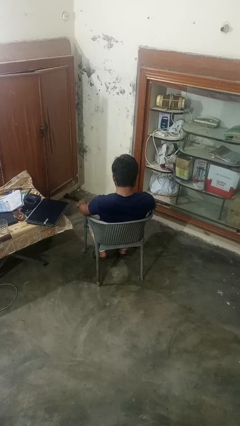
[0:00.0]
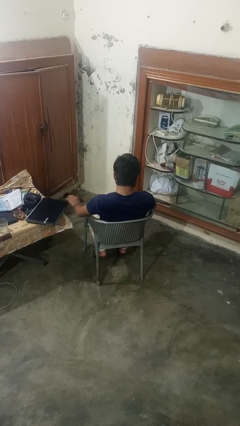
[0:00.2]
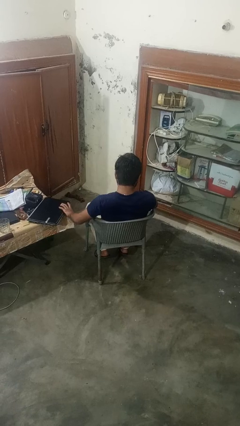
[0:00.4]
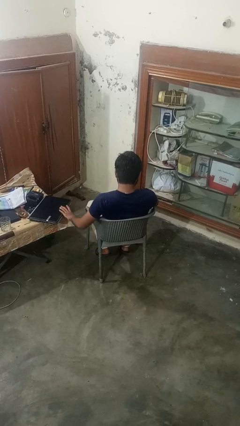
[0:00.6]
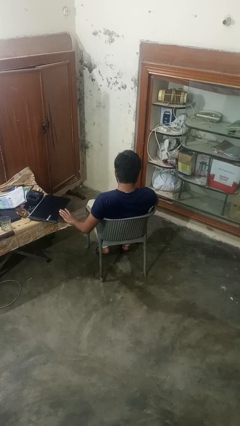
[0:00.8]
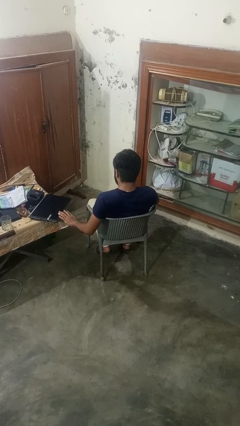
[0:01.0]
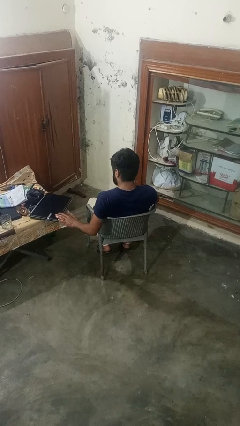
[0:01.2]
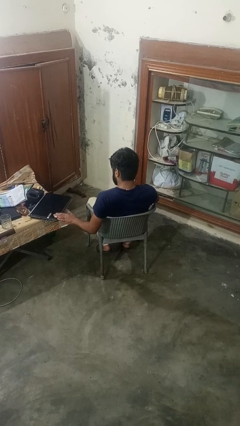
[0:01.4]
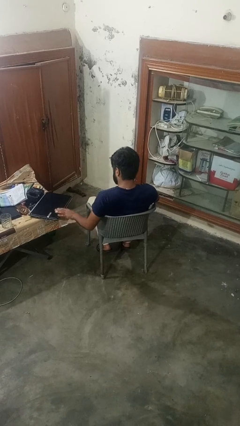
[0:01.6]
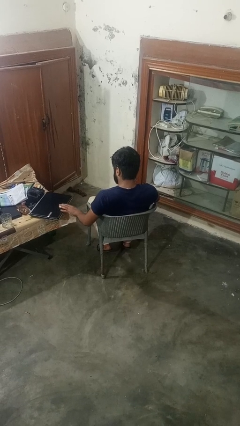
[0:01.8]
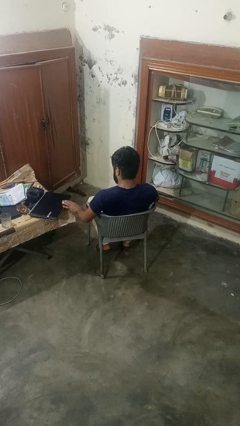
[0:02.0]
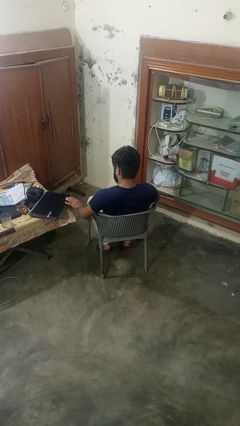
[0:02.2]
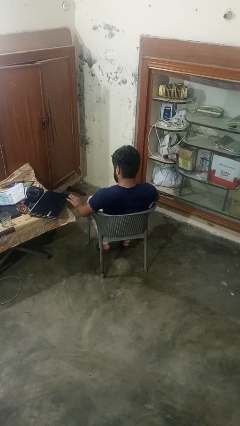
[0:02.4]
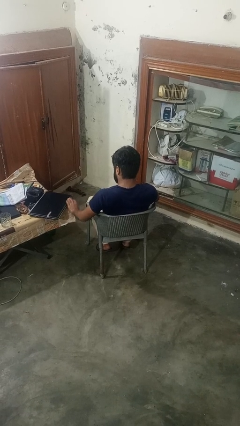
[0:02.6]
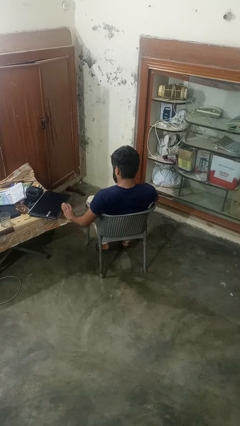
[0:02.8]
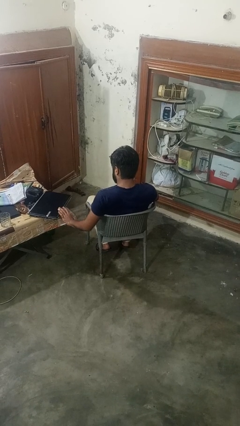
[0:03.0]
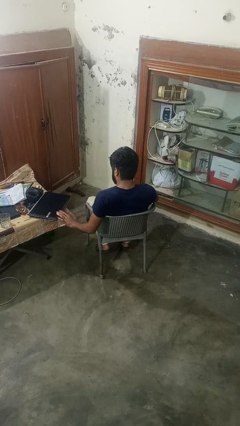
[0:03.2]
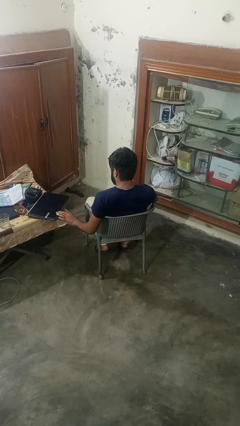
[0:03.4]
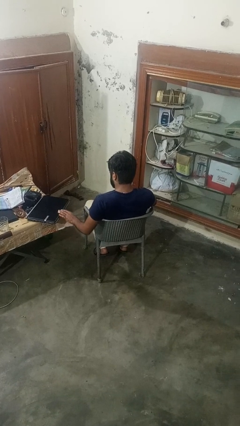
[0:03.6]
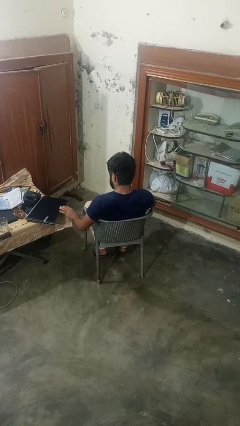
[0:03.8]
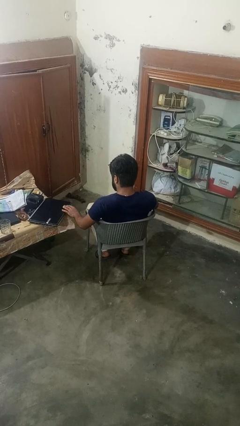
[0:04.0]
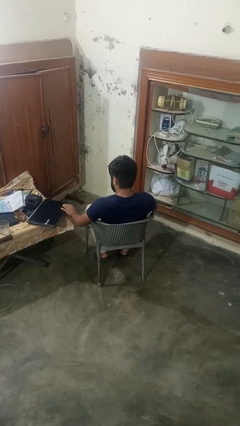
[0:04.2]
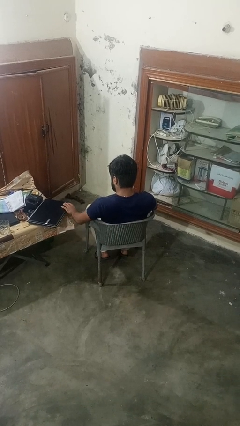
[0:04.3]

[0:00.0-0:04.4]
person waves hand over object

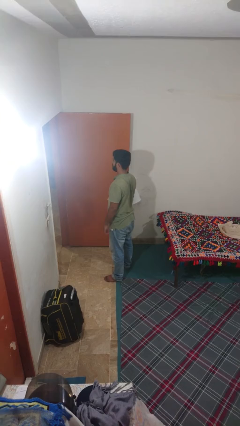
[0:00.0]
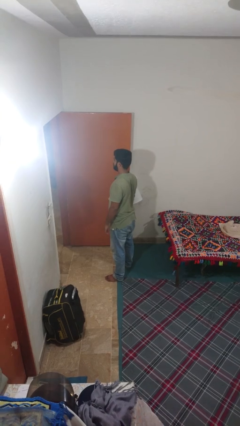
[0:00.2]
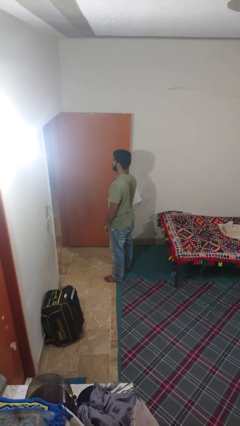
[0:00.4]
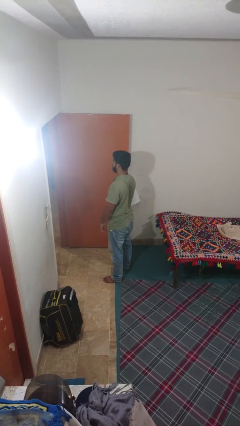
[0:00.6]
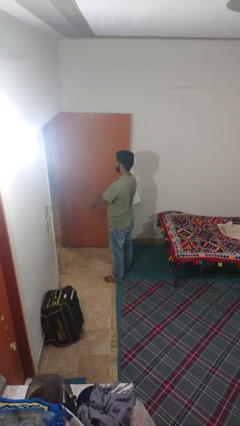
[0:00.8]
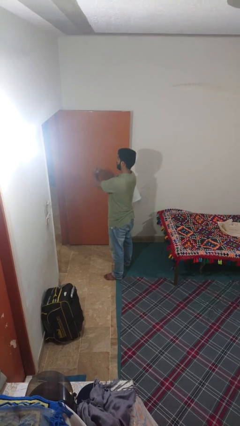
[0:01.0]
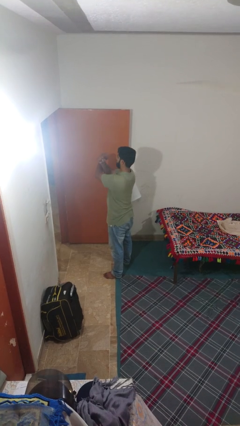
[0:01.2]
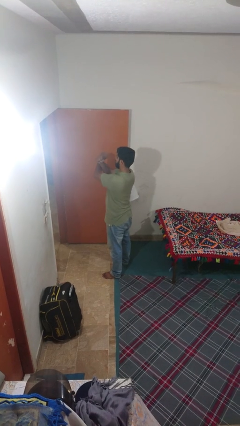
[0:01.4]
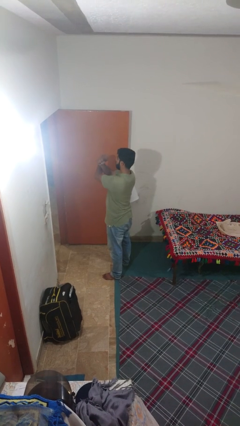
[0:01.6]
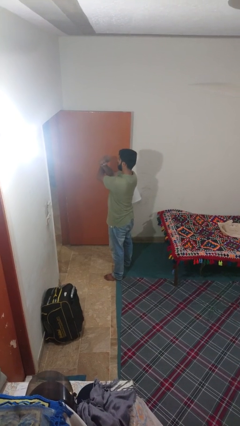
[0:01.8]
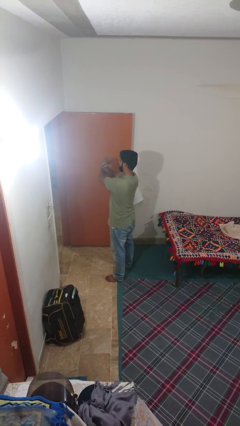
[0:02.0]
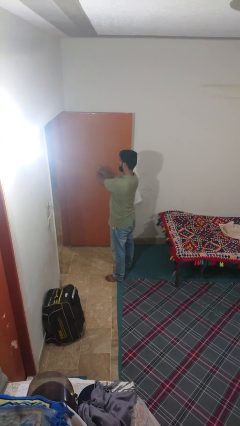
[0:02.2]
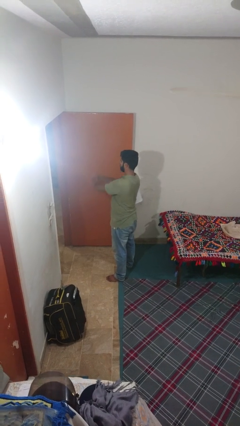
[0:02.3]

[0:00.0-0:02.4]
person crosses arms

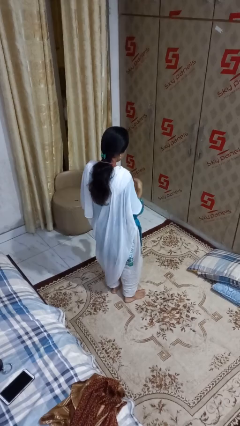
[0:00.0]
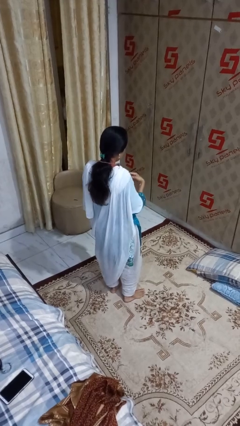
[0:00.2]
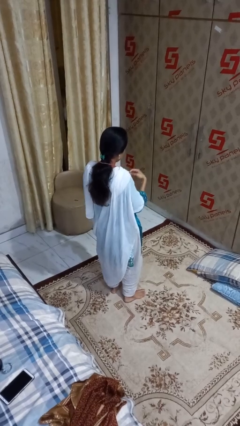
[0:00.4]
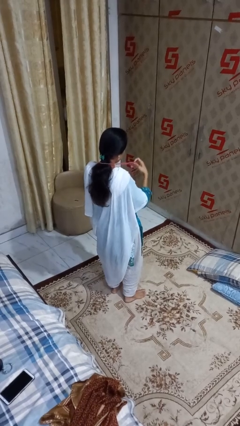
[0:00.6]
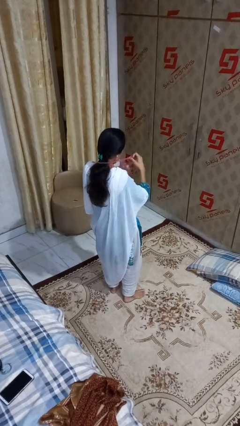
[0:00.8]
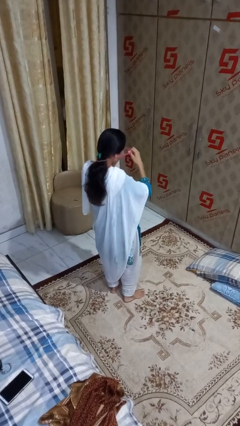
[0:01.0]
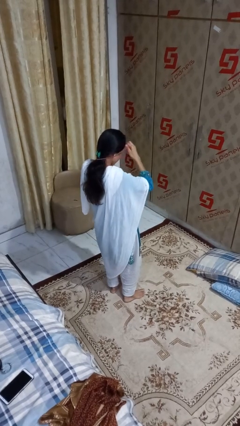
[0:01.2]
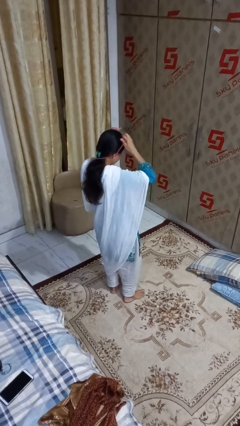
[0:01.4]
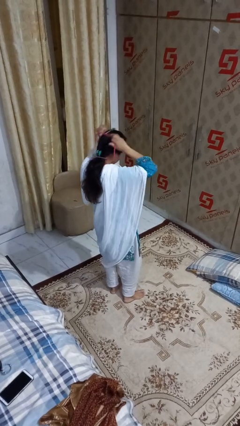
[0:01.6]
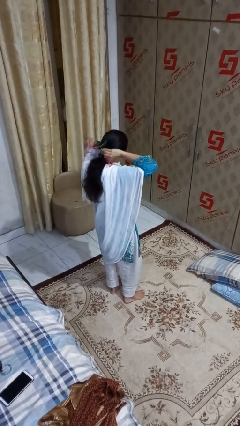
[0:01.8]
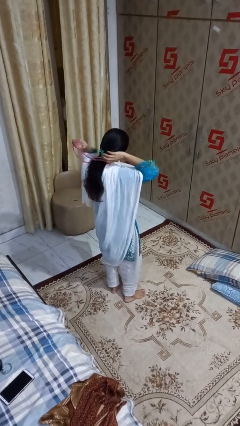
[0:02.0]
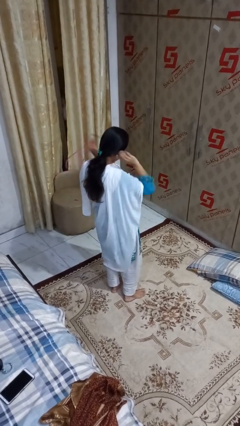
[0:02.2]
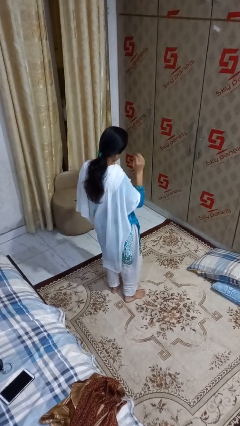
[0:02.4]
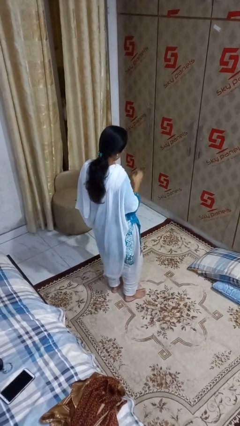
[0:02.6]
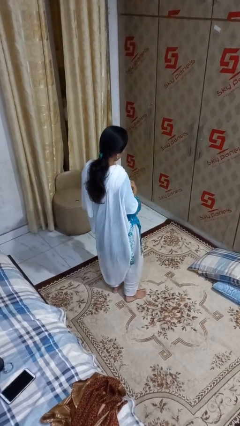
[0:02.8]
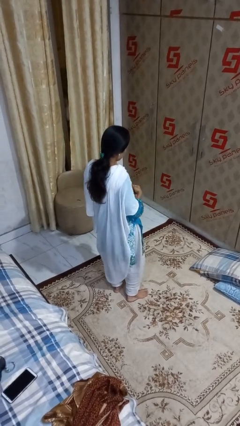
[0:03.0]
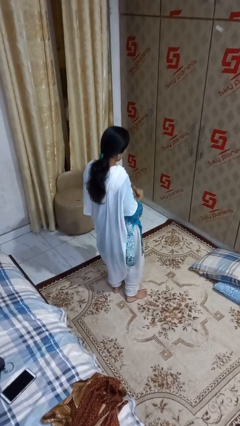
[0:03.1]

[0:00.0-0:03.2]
person takes off necklace

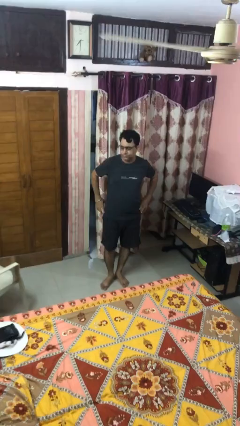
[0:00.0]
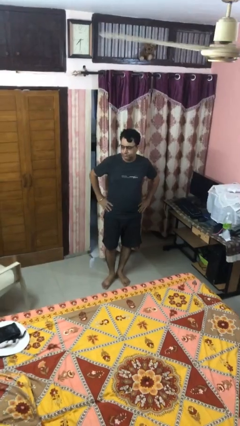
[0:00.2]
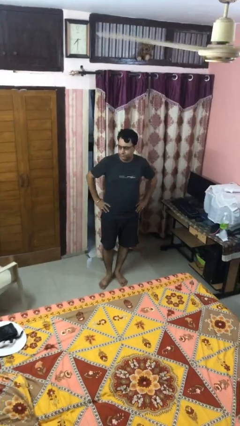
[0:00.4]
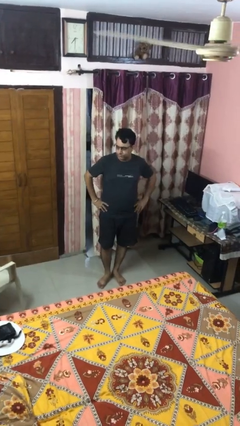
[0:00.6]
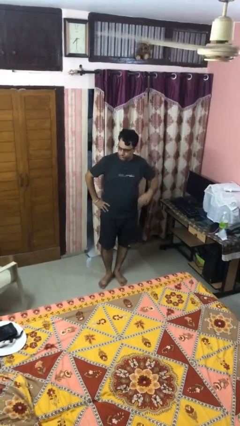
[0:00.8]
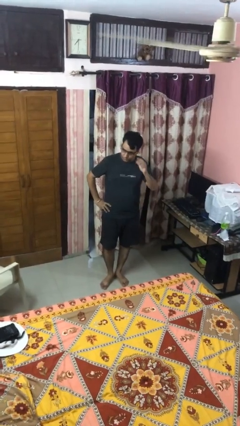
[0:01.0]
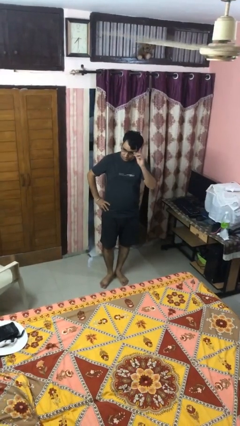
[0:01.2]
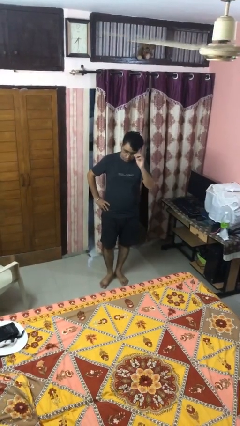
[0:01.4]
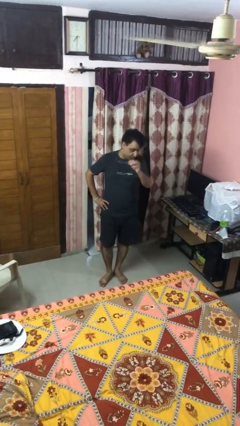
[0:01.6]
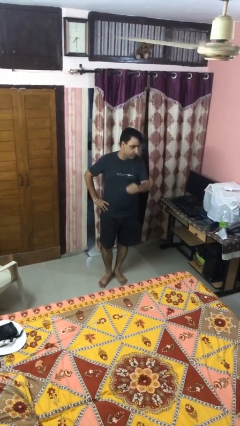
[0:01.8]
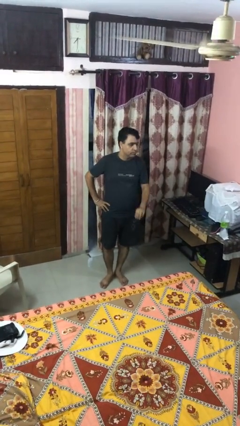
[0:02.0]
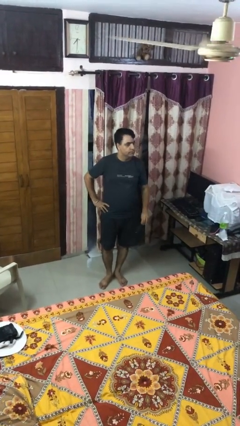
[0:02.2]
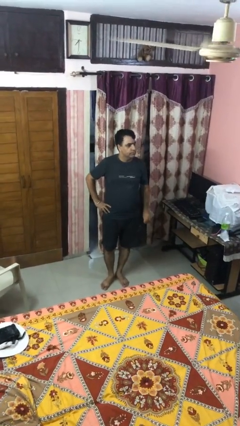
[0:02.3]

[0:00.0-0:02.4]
person takes off glasses

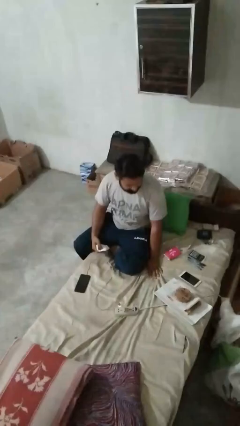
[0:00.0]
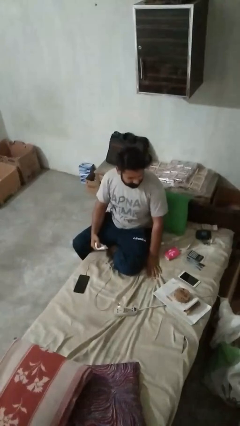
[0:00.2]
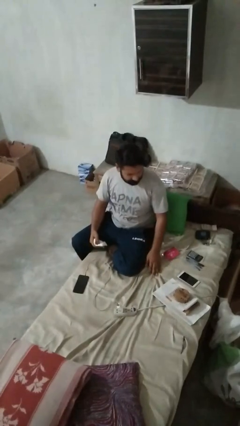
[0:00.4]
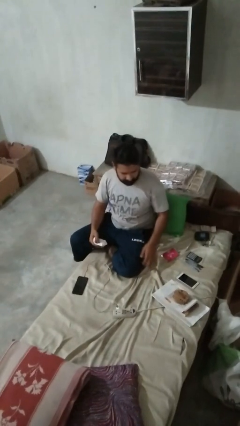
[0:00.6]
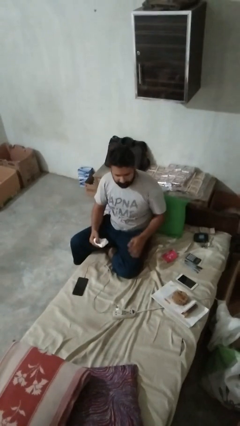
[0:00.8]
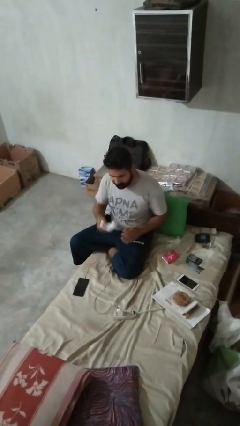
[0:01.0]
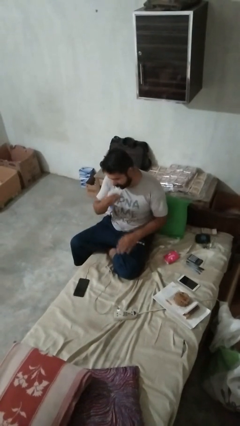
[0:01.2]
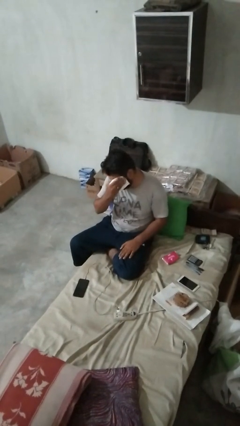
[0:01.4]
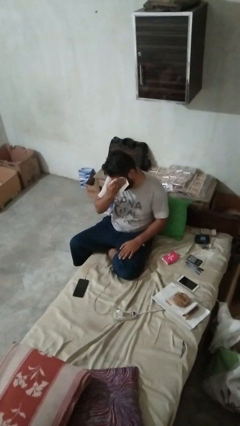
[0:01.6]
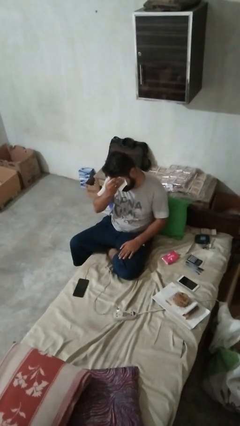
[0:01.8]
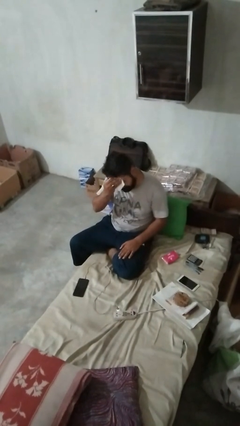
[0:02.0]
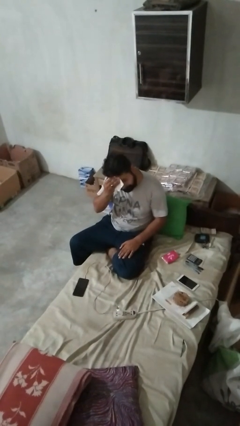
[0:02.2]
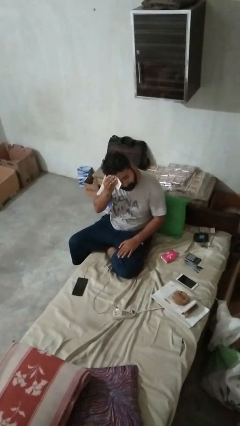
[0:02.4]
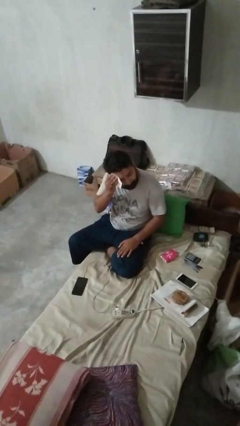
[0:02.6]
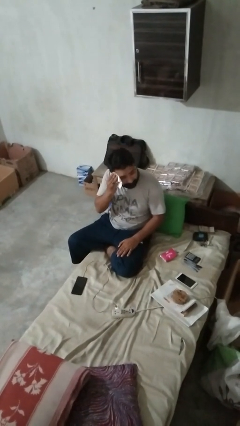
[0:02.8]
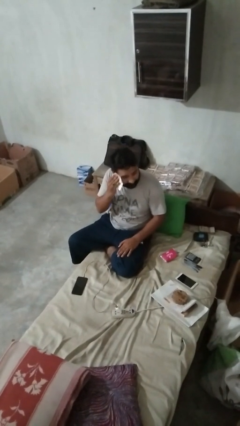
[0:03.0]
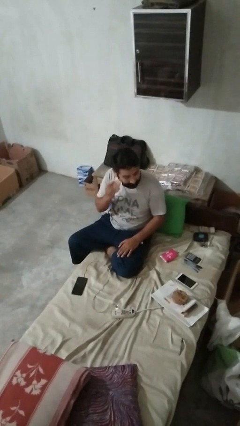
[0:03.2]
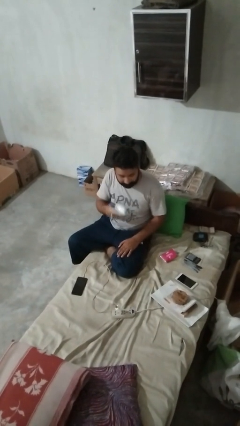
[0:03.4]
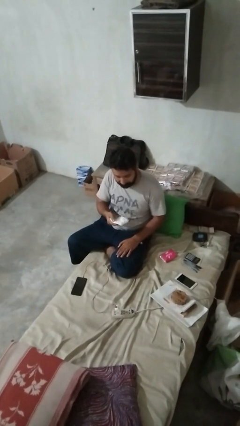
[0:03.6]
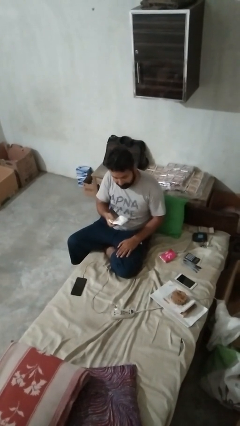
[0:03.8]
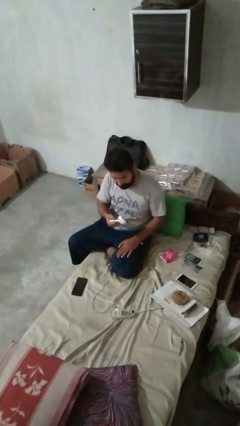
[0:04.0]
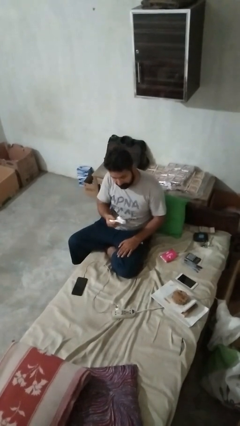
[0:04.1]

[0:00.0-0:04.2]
person wipes mouth with napkin

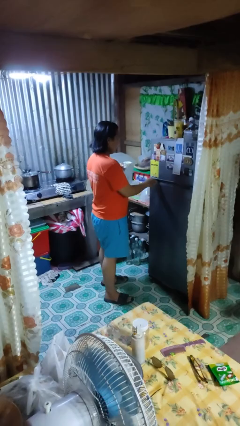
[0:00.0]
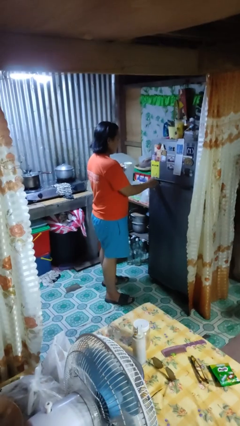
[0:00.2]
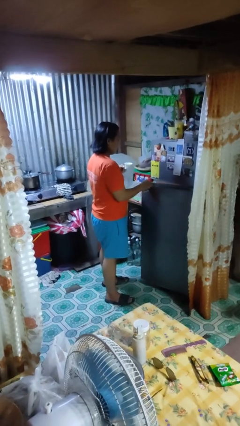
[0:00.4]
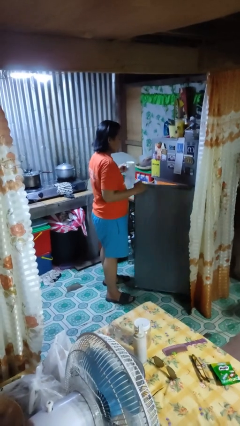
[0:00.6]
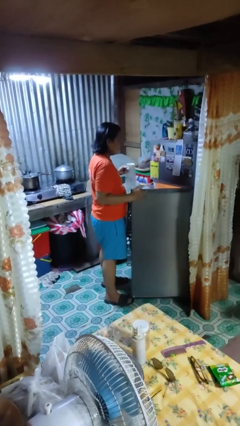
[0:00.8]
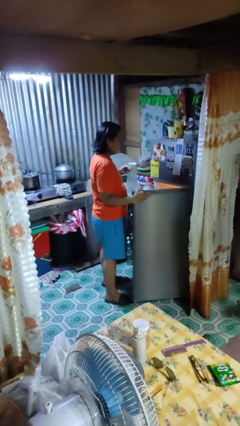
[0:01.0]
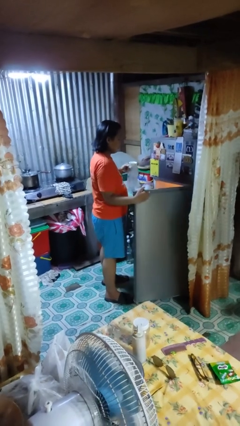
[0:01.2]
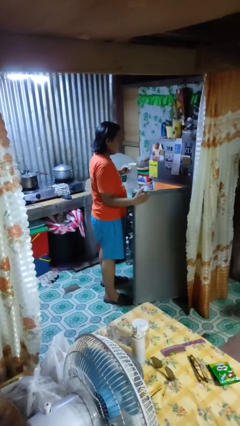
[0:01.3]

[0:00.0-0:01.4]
person opens refrigerator
